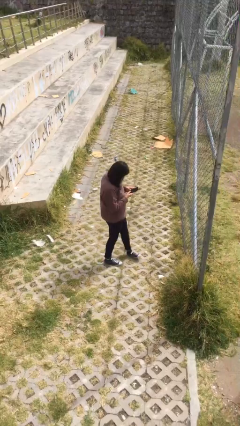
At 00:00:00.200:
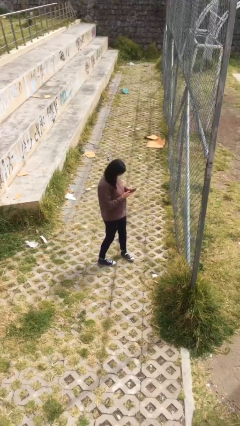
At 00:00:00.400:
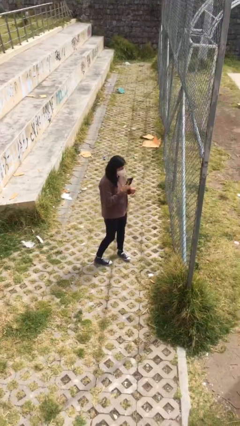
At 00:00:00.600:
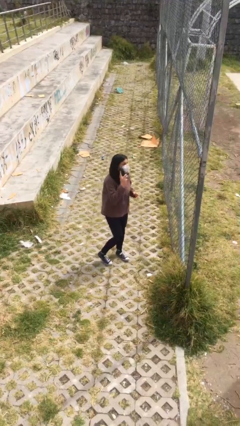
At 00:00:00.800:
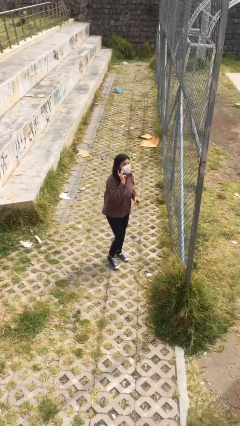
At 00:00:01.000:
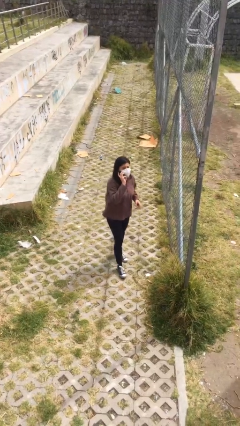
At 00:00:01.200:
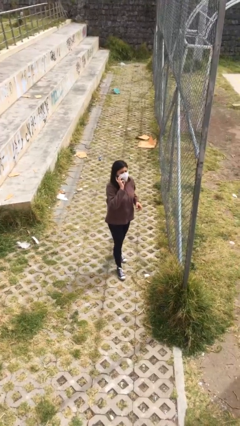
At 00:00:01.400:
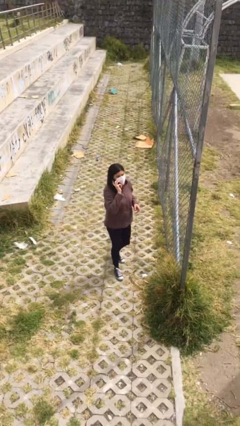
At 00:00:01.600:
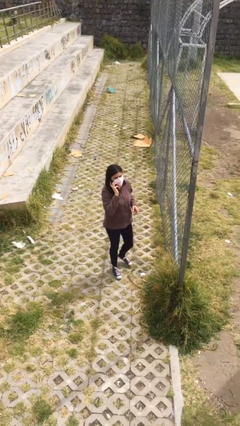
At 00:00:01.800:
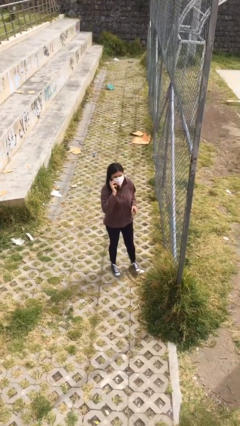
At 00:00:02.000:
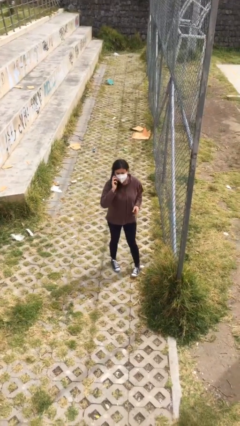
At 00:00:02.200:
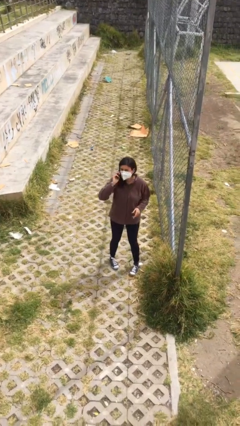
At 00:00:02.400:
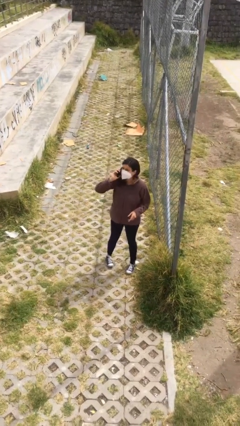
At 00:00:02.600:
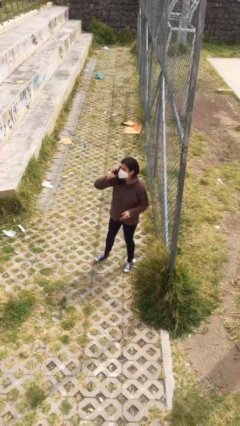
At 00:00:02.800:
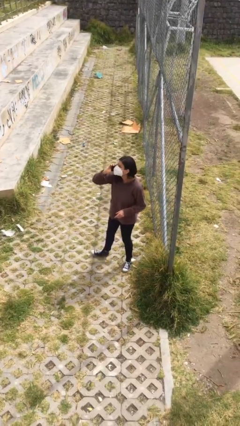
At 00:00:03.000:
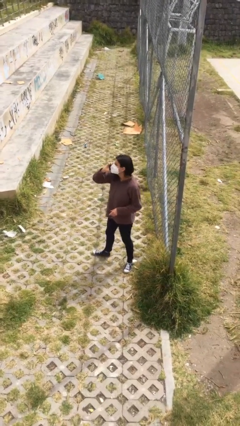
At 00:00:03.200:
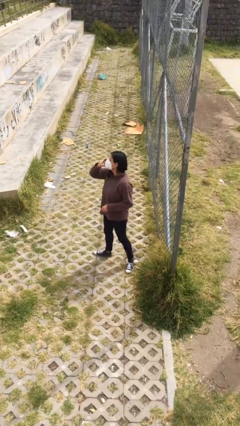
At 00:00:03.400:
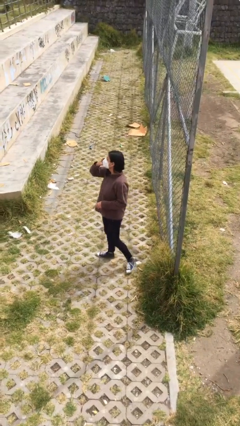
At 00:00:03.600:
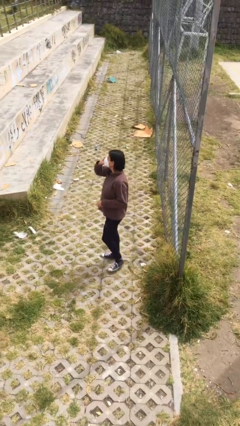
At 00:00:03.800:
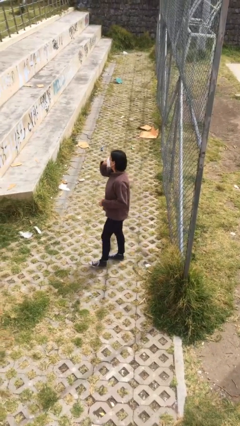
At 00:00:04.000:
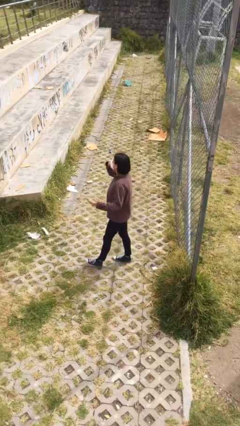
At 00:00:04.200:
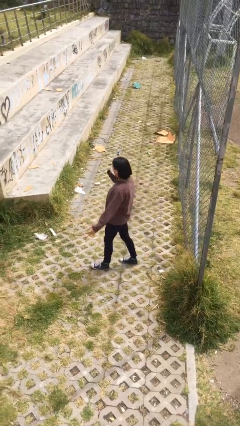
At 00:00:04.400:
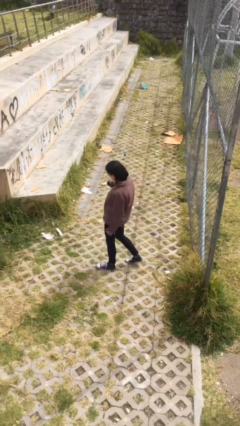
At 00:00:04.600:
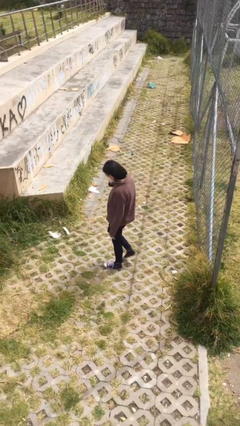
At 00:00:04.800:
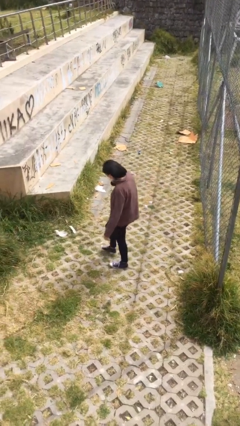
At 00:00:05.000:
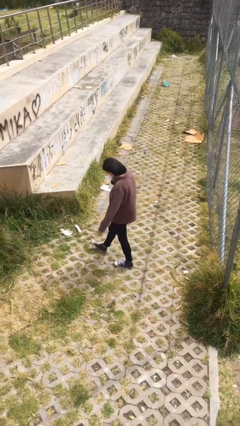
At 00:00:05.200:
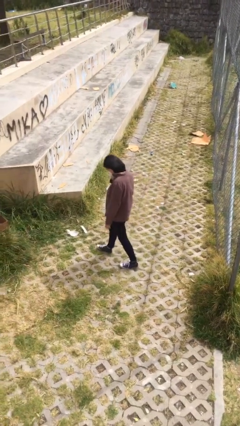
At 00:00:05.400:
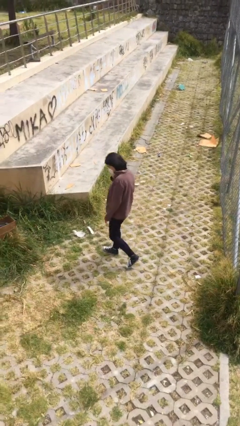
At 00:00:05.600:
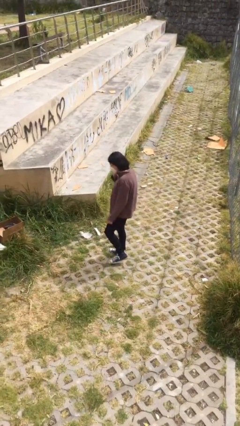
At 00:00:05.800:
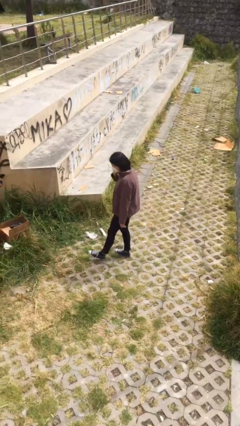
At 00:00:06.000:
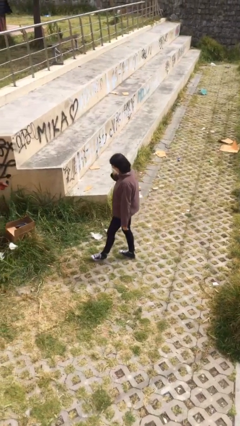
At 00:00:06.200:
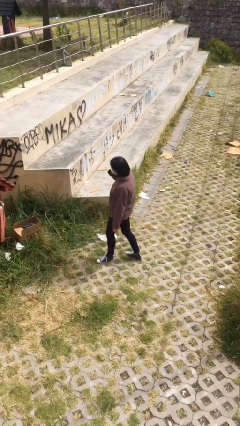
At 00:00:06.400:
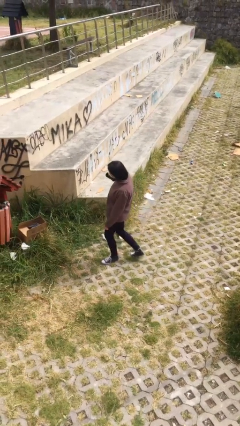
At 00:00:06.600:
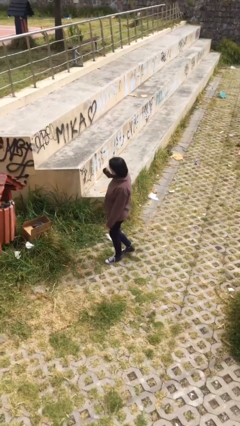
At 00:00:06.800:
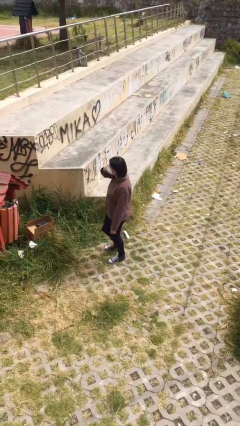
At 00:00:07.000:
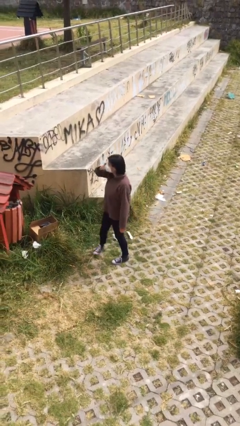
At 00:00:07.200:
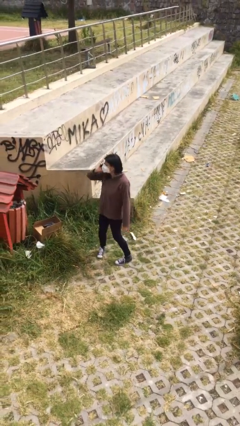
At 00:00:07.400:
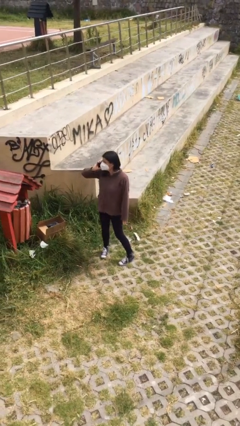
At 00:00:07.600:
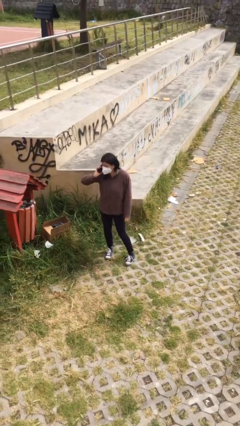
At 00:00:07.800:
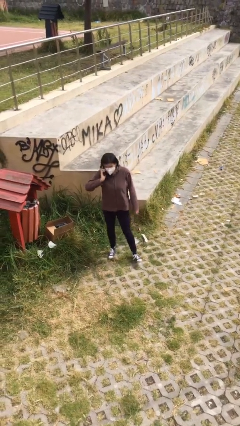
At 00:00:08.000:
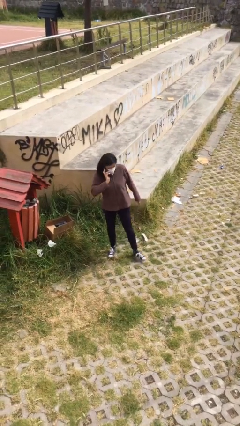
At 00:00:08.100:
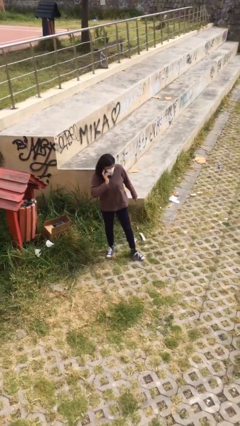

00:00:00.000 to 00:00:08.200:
person talks on phone

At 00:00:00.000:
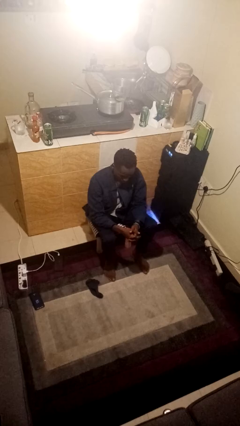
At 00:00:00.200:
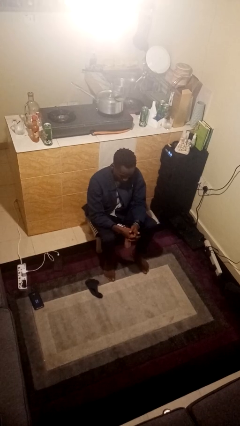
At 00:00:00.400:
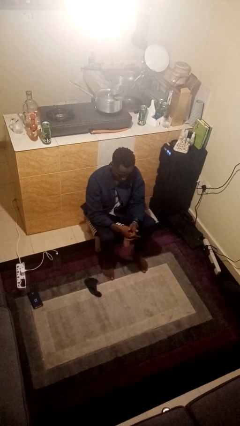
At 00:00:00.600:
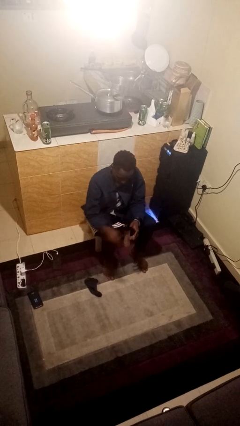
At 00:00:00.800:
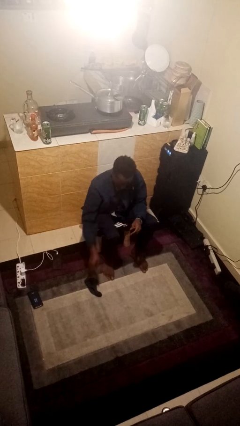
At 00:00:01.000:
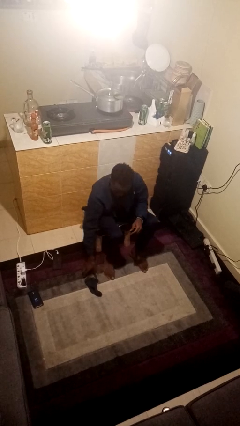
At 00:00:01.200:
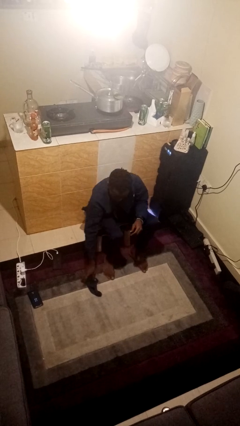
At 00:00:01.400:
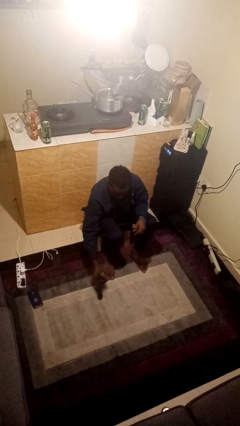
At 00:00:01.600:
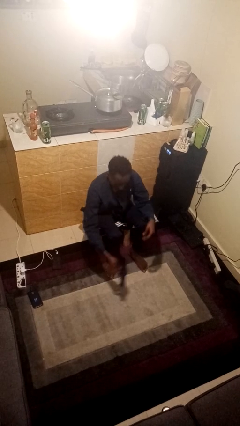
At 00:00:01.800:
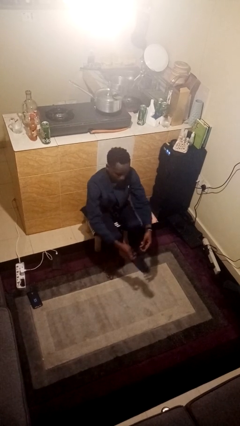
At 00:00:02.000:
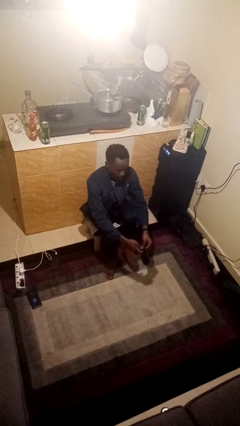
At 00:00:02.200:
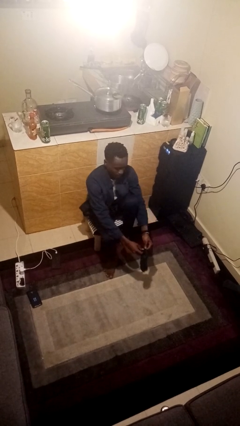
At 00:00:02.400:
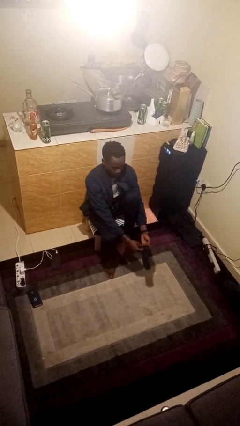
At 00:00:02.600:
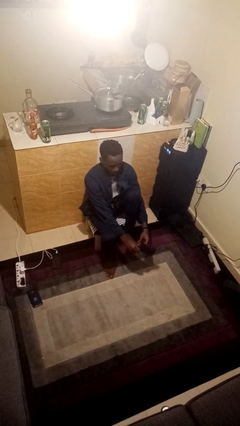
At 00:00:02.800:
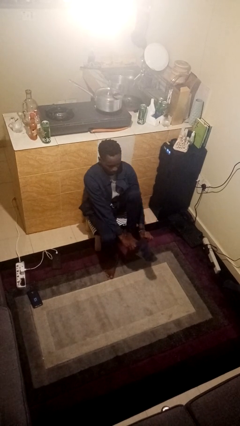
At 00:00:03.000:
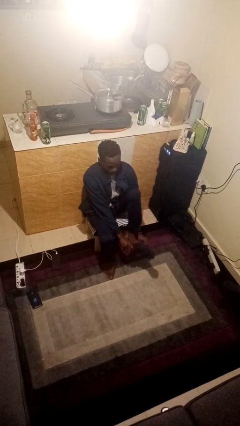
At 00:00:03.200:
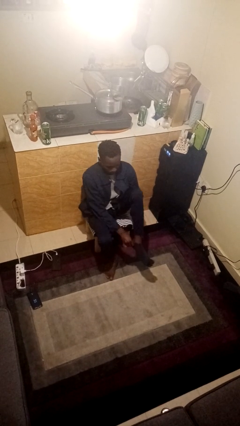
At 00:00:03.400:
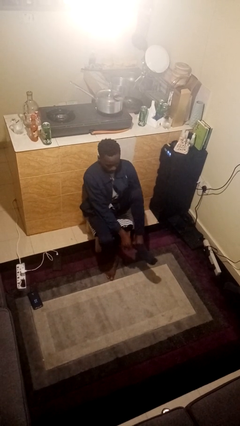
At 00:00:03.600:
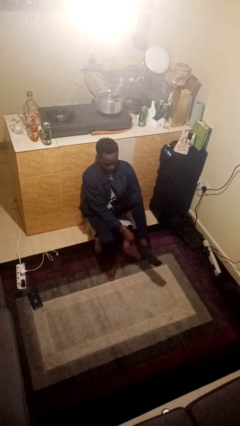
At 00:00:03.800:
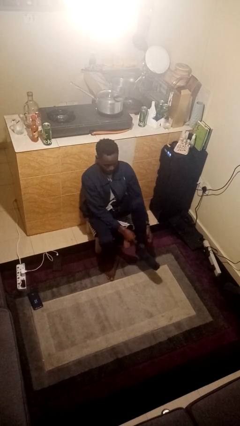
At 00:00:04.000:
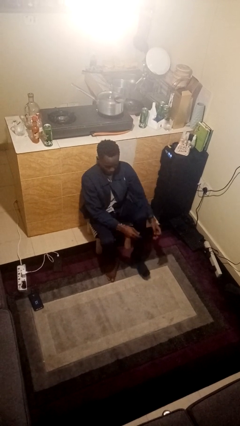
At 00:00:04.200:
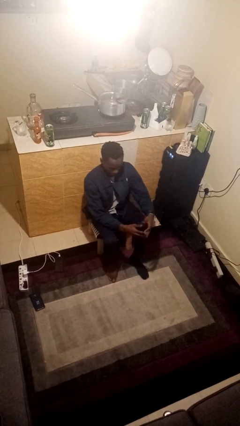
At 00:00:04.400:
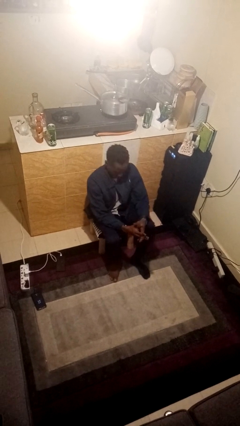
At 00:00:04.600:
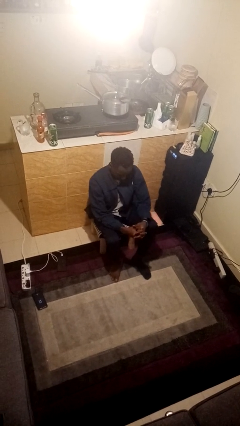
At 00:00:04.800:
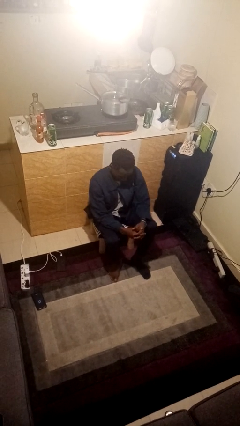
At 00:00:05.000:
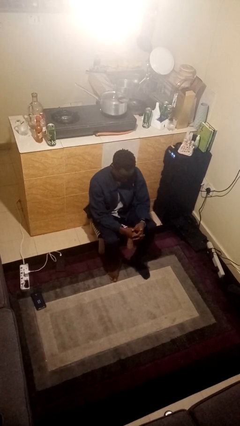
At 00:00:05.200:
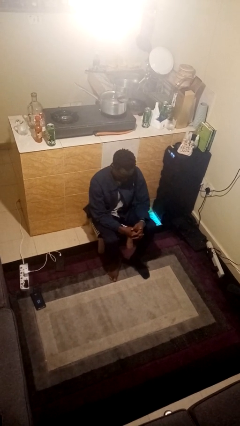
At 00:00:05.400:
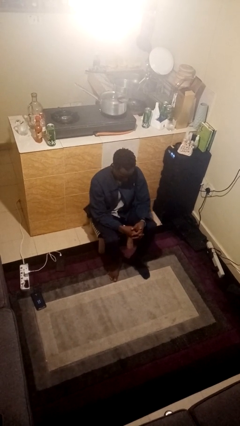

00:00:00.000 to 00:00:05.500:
person puts on socks

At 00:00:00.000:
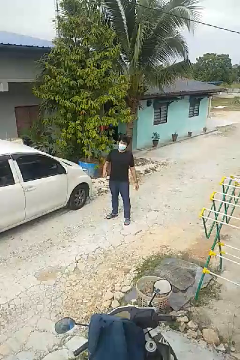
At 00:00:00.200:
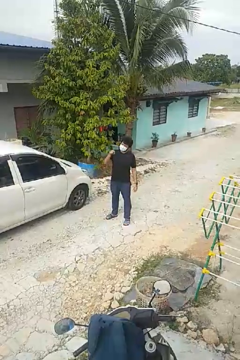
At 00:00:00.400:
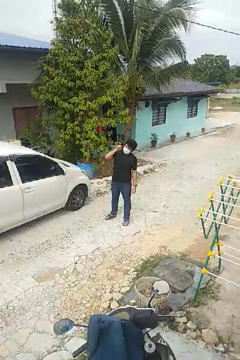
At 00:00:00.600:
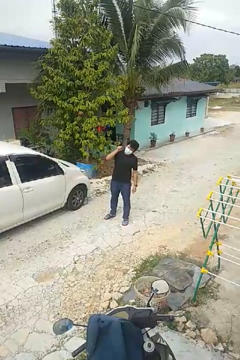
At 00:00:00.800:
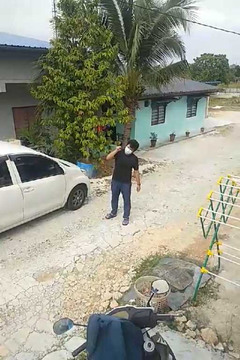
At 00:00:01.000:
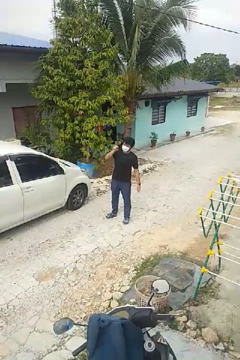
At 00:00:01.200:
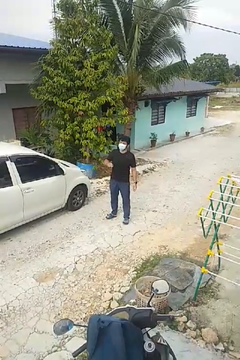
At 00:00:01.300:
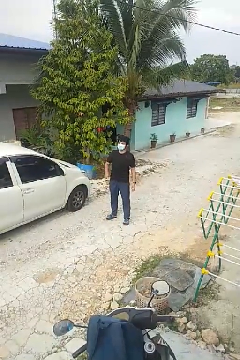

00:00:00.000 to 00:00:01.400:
person points at person

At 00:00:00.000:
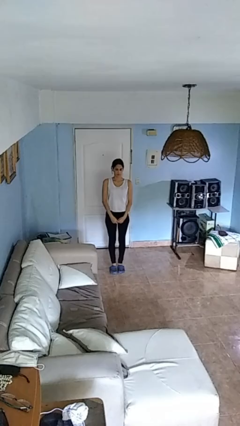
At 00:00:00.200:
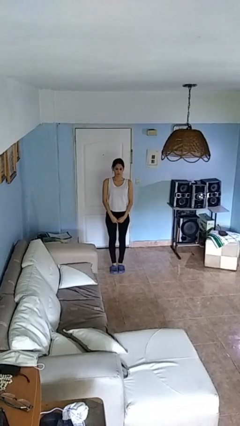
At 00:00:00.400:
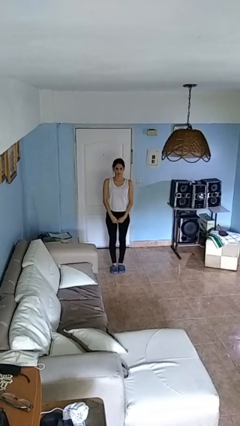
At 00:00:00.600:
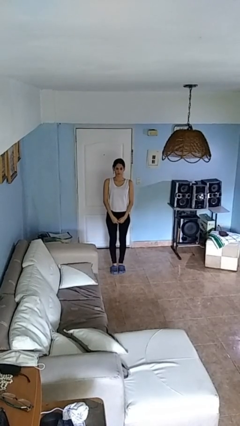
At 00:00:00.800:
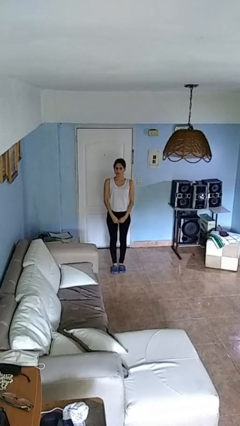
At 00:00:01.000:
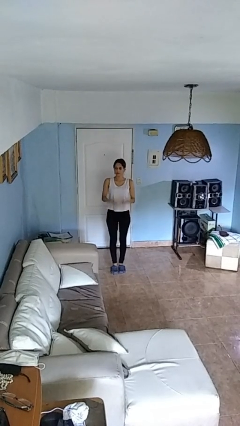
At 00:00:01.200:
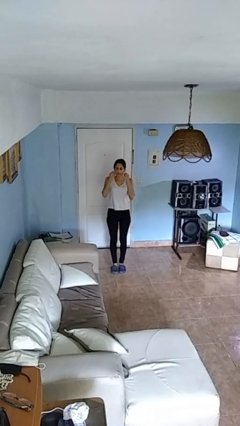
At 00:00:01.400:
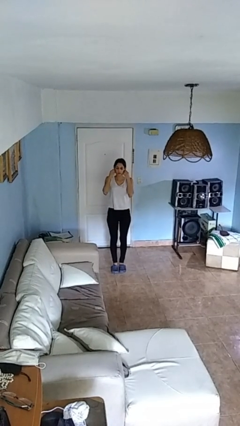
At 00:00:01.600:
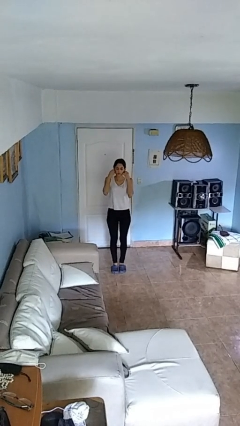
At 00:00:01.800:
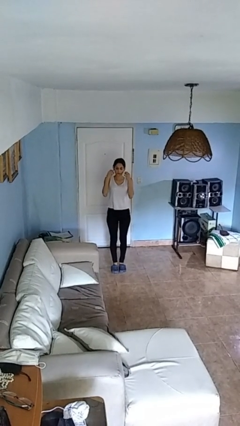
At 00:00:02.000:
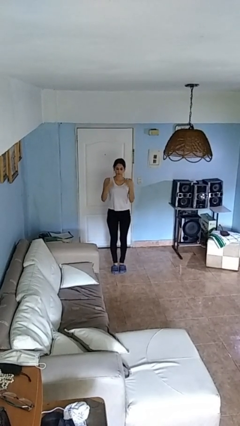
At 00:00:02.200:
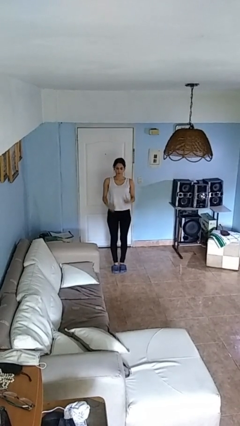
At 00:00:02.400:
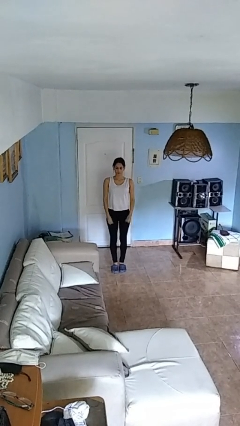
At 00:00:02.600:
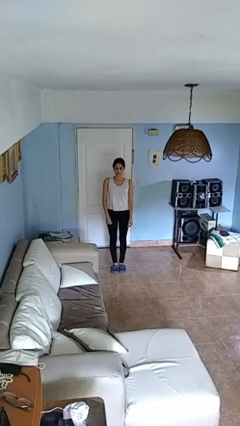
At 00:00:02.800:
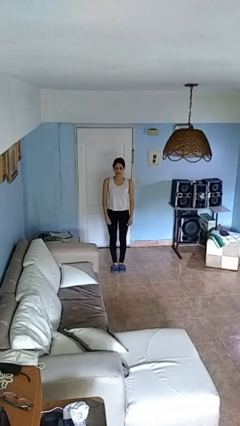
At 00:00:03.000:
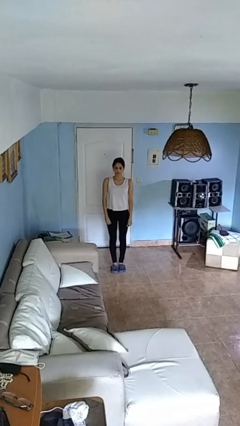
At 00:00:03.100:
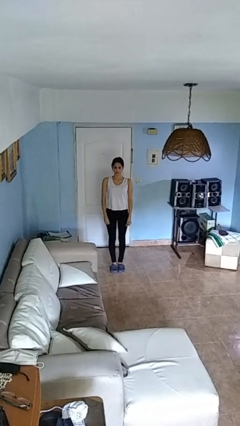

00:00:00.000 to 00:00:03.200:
person takes off necklace
